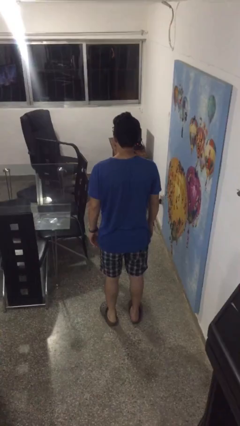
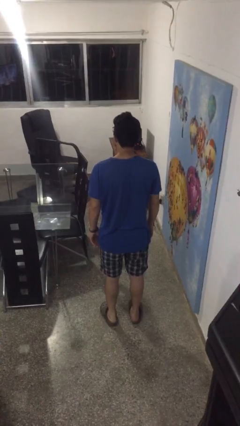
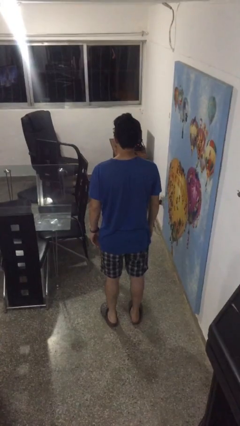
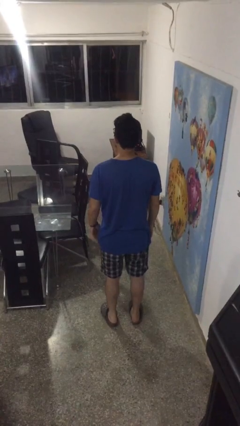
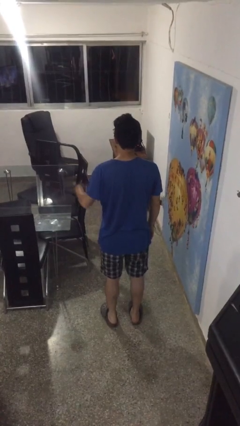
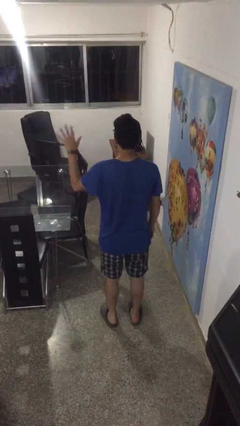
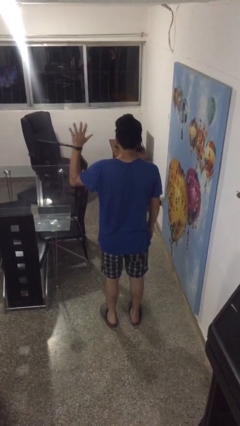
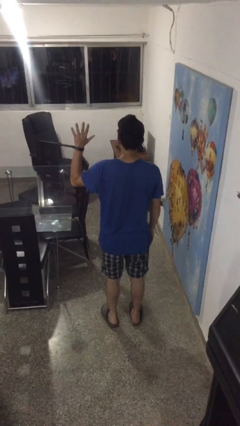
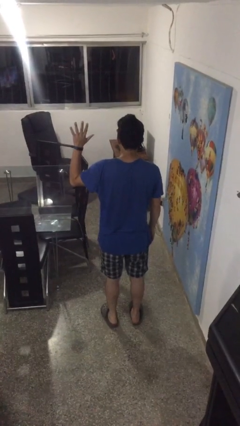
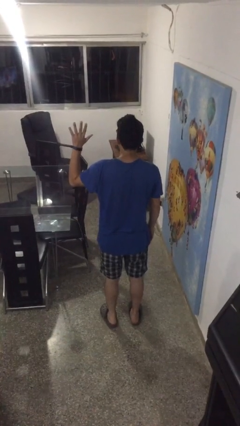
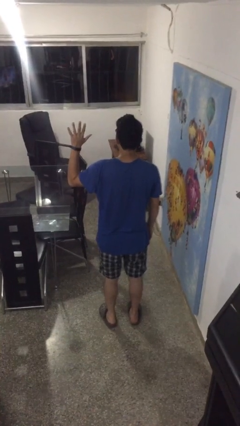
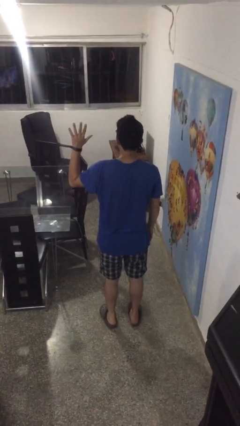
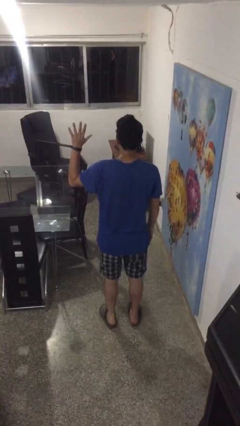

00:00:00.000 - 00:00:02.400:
person gestures number five

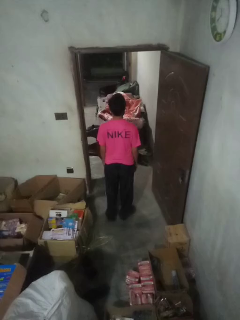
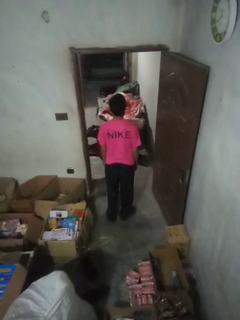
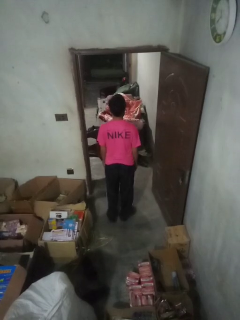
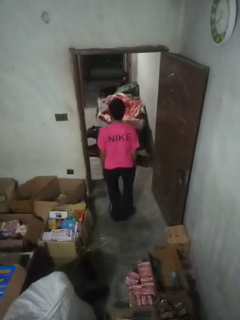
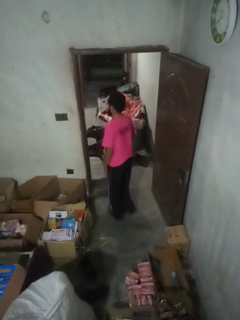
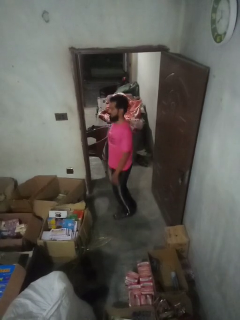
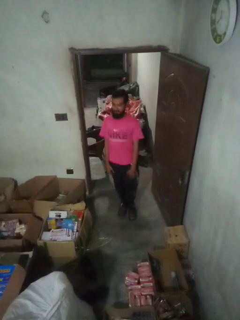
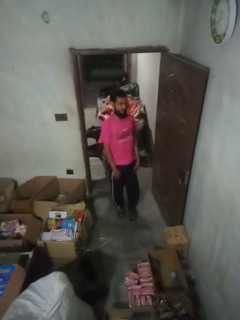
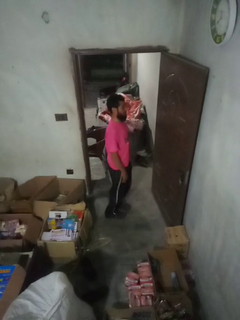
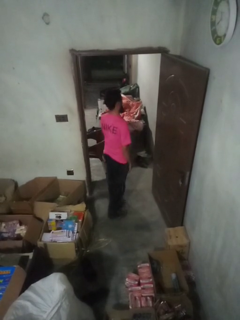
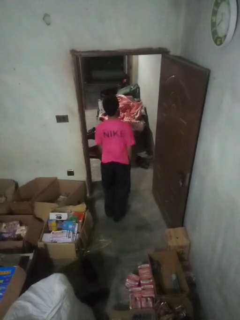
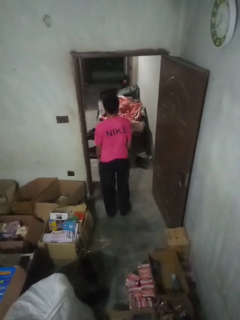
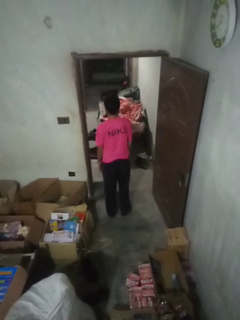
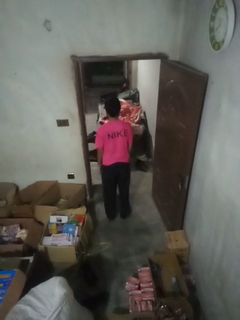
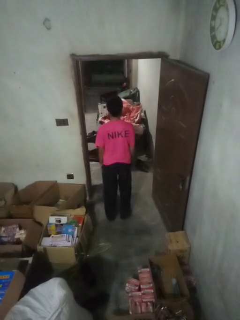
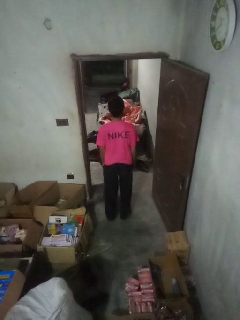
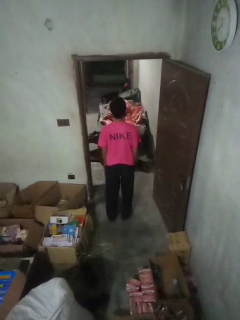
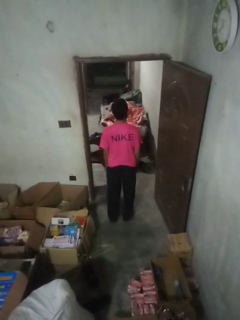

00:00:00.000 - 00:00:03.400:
person twirls

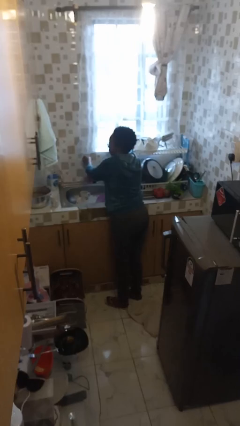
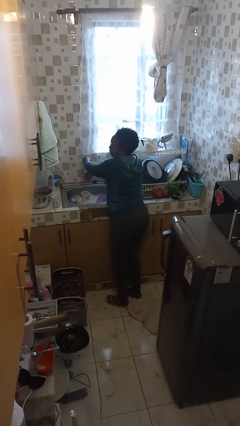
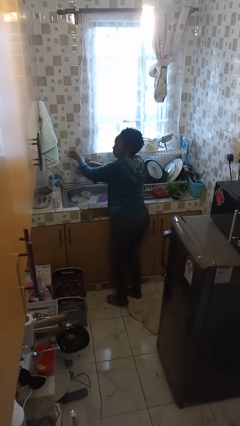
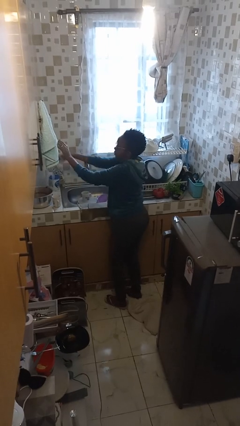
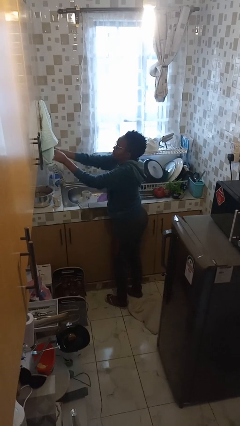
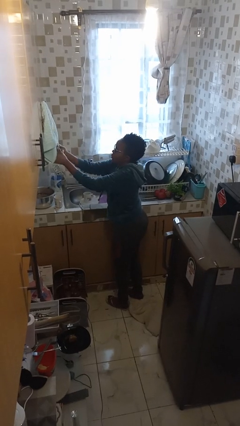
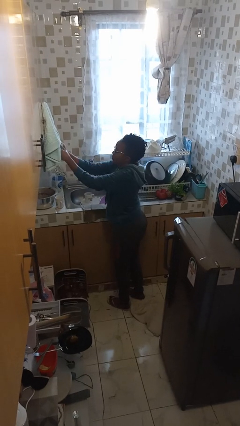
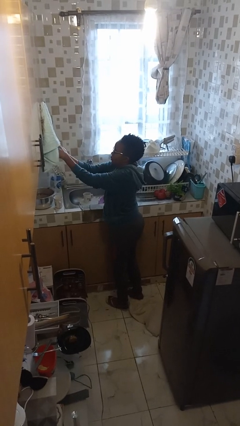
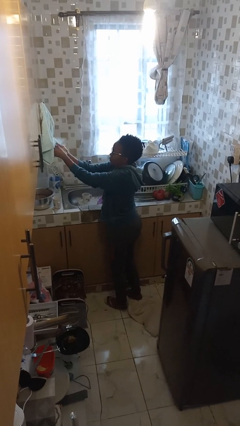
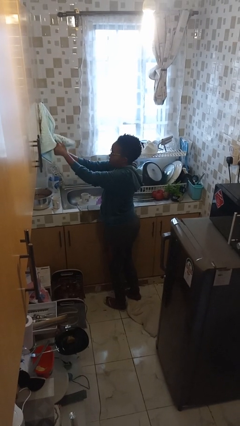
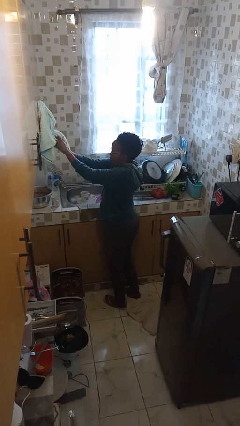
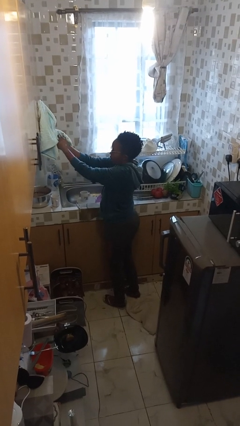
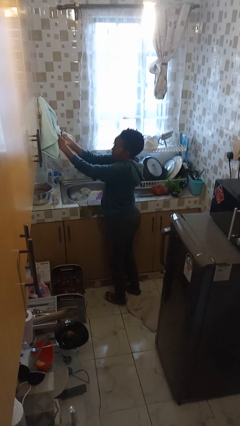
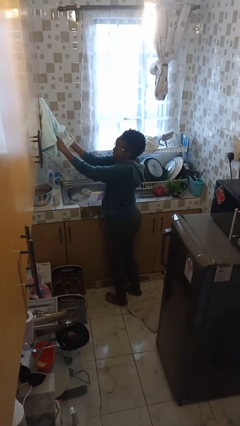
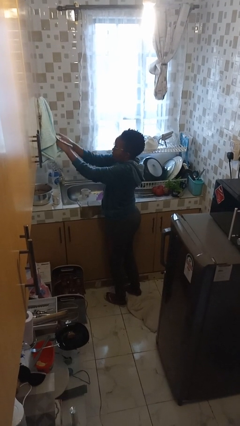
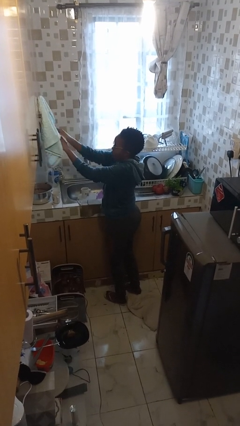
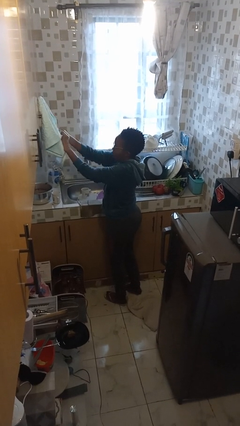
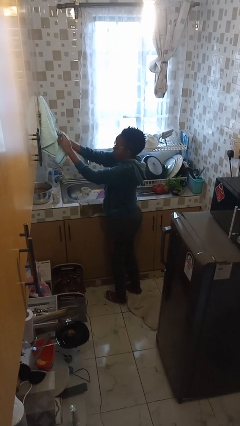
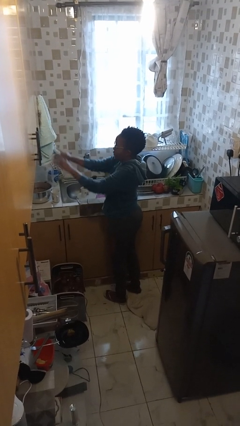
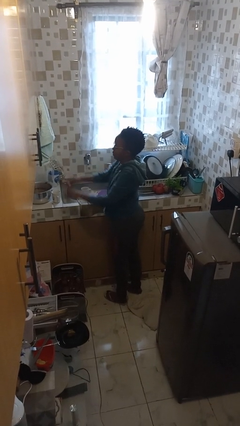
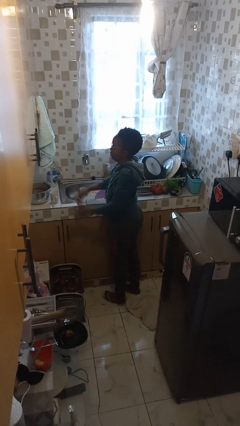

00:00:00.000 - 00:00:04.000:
person dries hands with towel

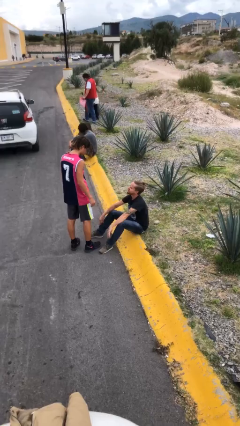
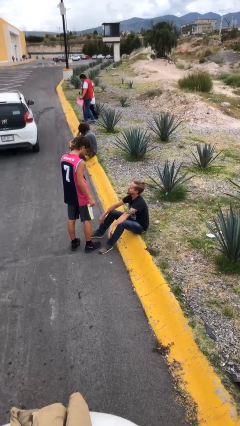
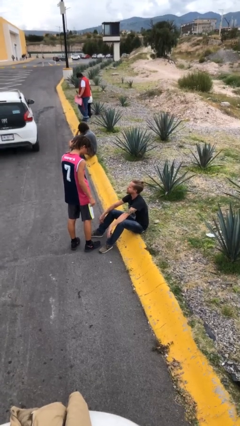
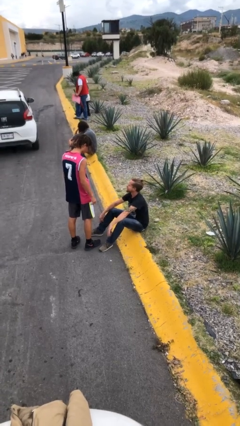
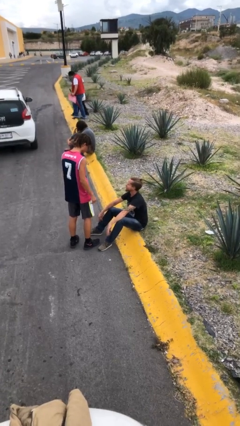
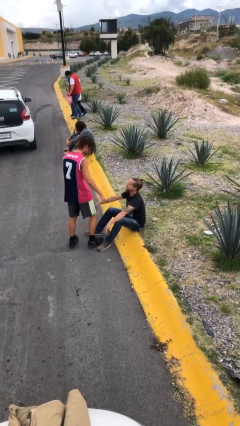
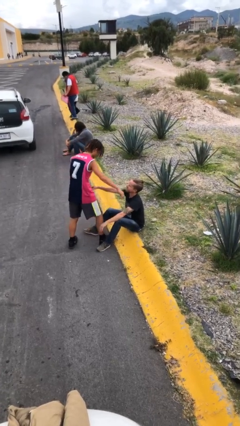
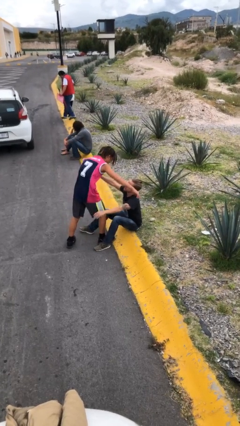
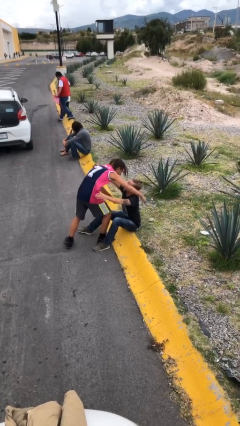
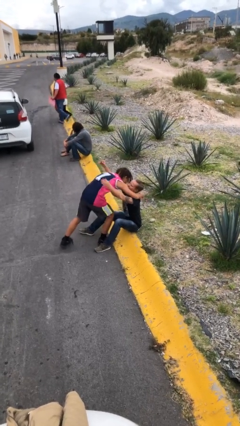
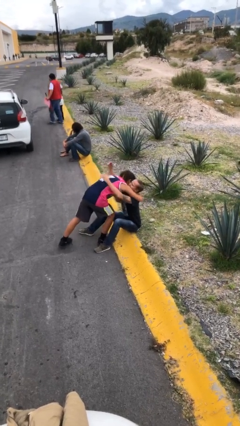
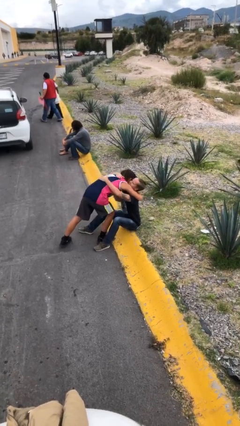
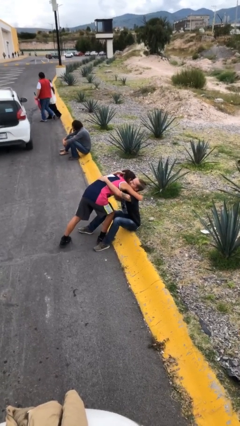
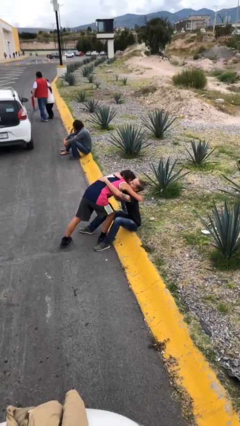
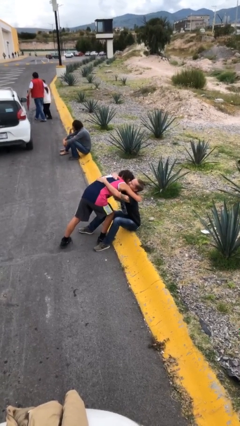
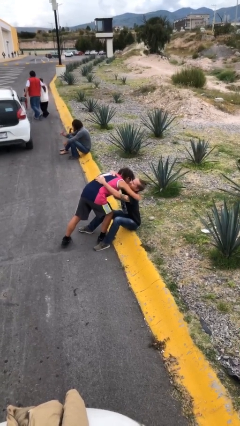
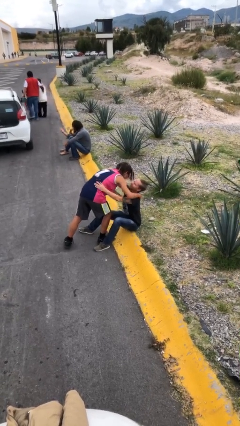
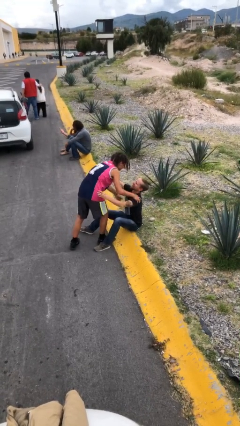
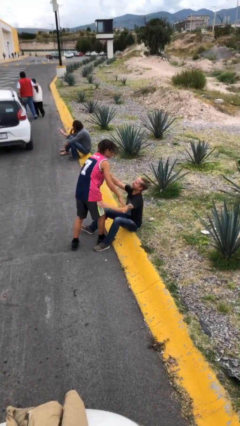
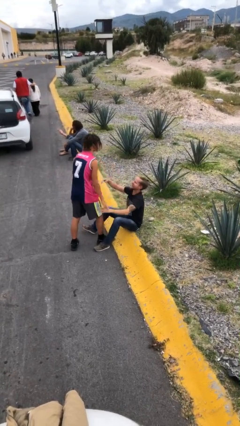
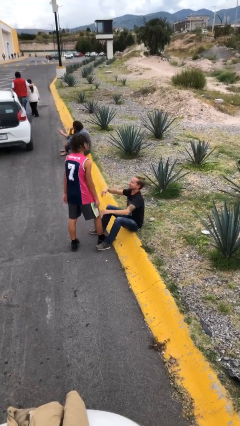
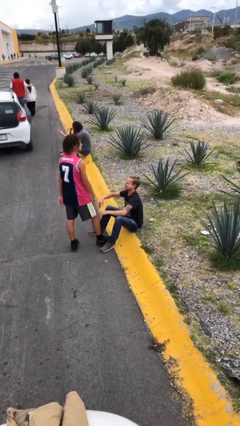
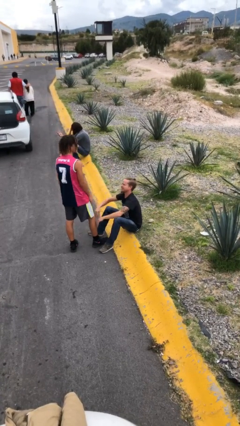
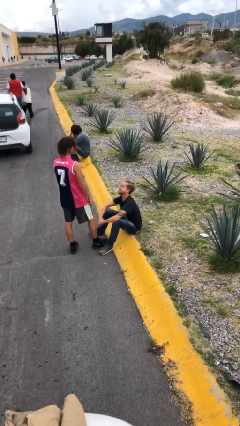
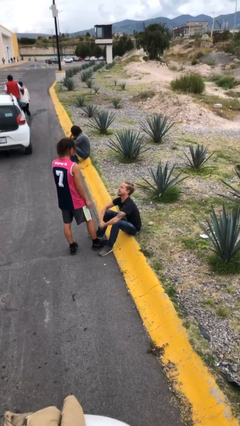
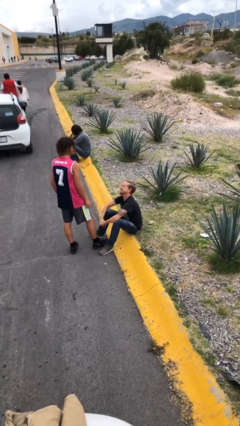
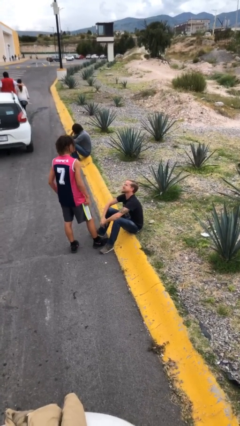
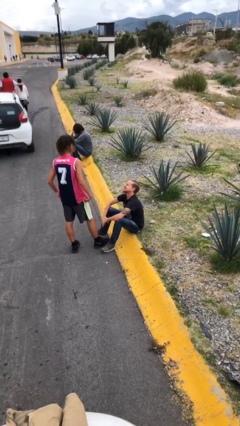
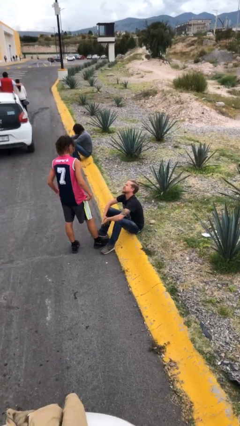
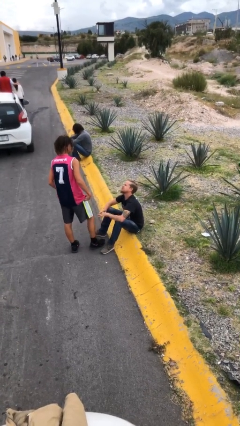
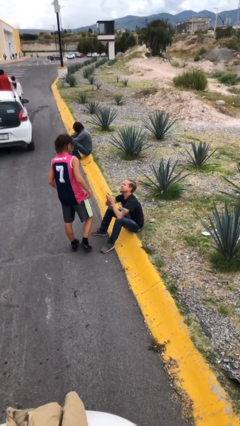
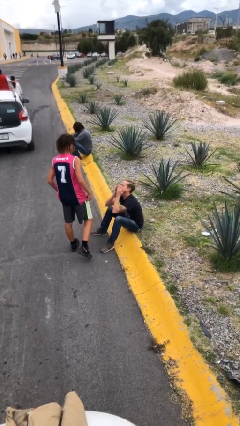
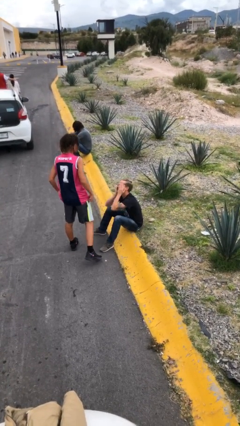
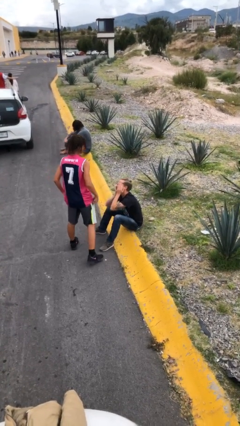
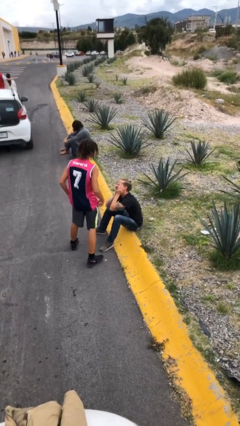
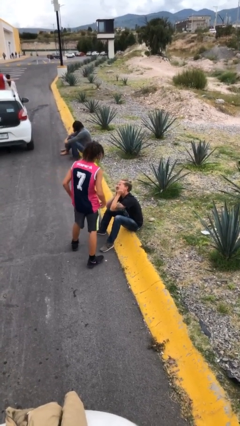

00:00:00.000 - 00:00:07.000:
person embraces person

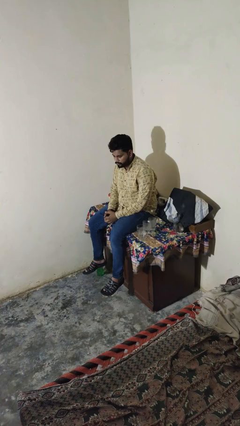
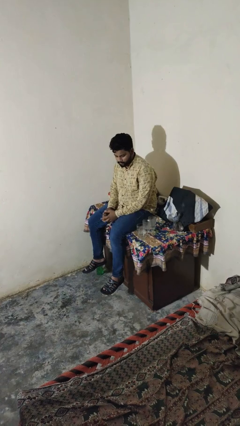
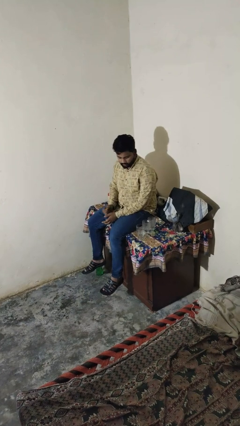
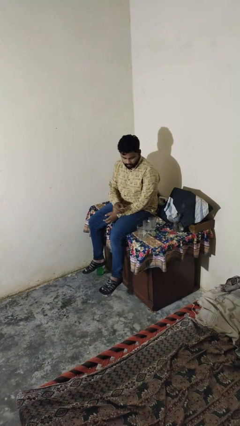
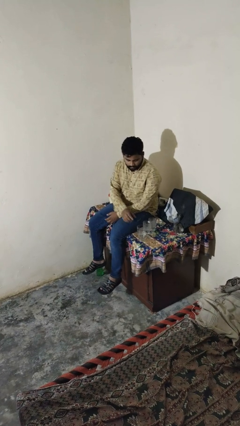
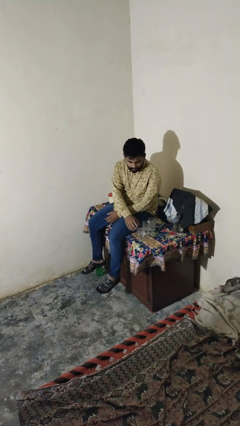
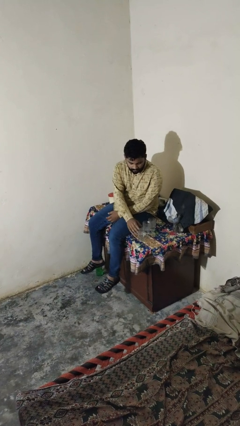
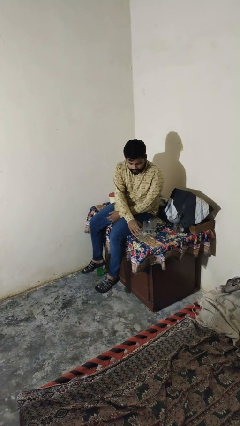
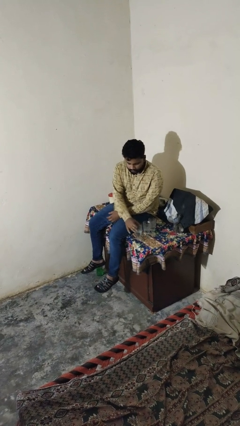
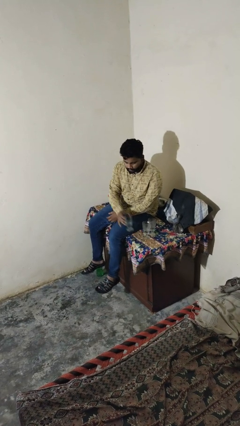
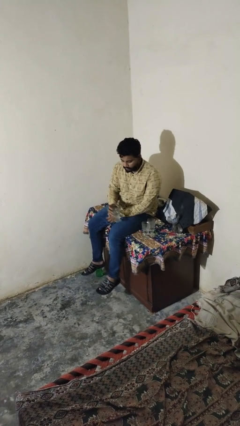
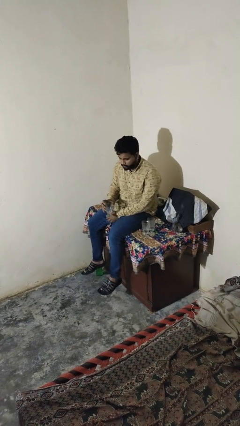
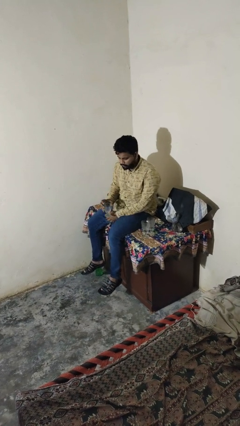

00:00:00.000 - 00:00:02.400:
person picks up object from table
